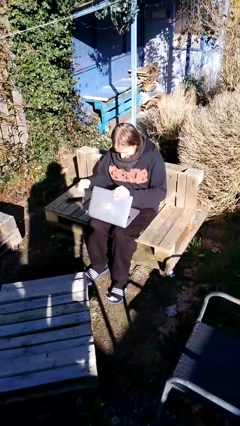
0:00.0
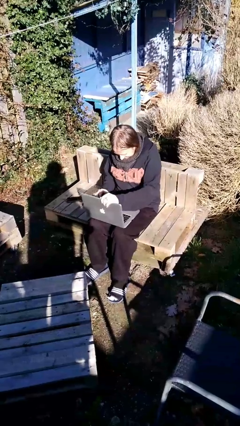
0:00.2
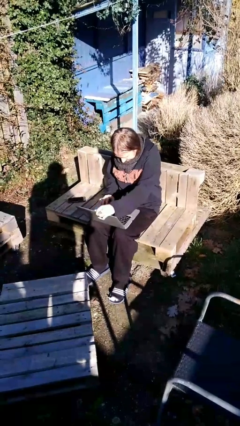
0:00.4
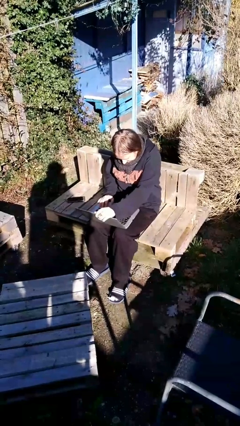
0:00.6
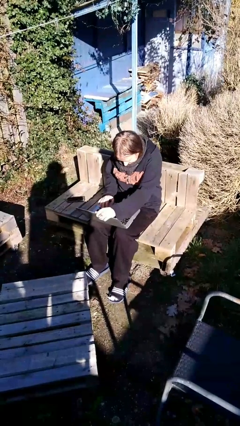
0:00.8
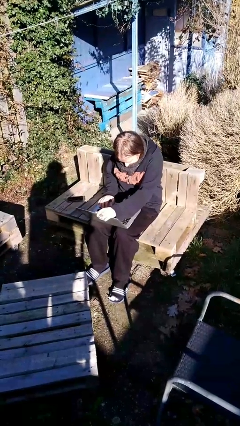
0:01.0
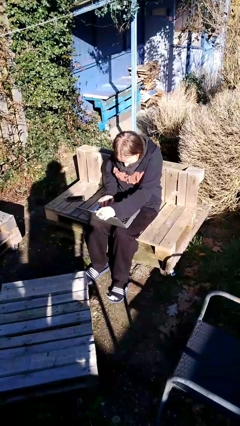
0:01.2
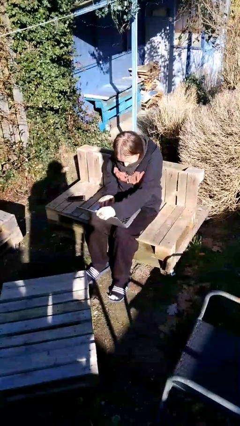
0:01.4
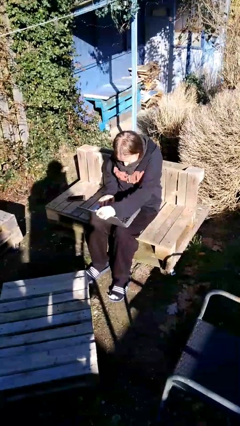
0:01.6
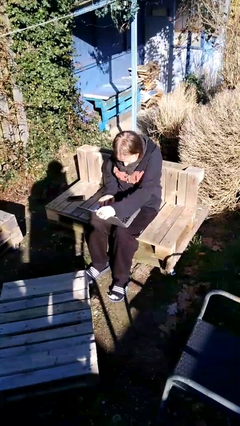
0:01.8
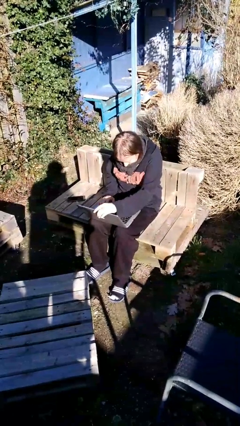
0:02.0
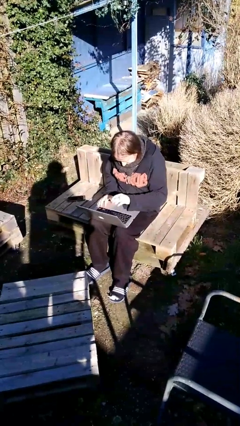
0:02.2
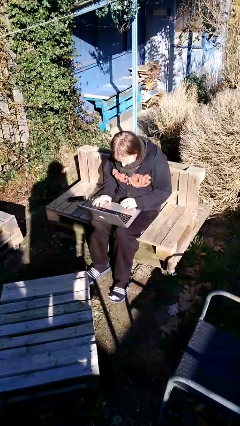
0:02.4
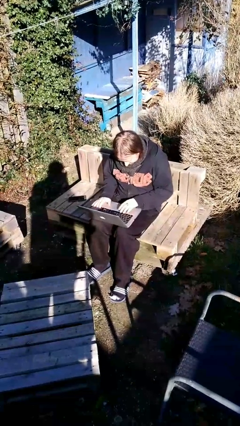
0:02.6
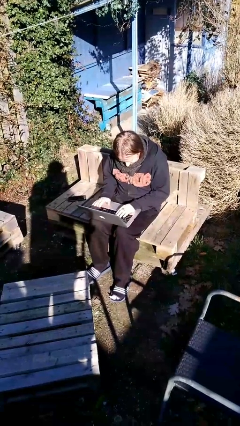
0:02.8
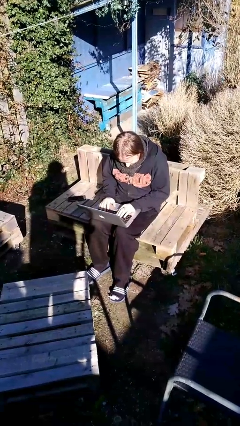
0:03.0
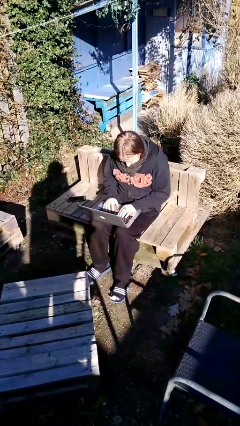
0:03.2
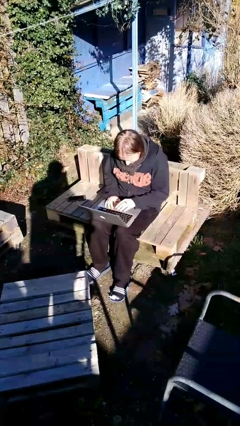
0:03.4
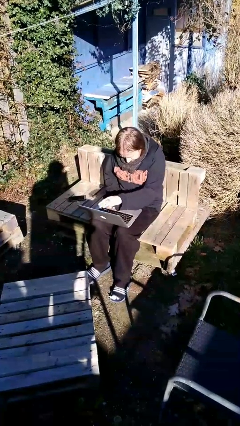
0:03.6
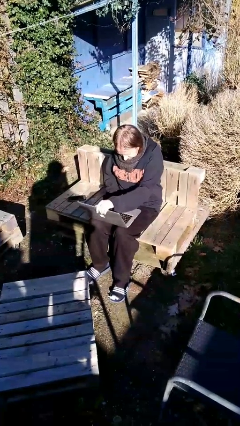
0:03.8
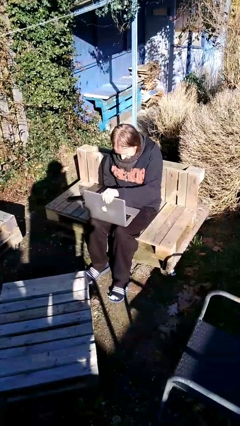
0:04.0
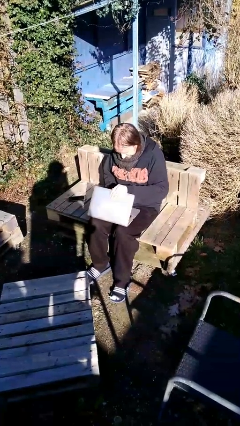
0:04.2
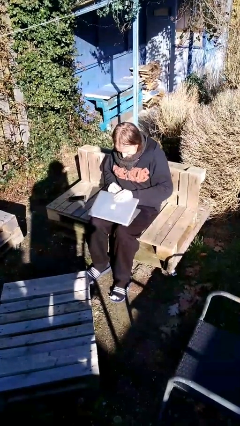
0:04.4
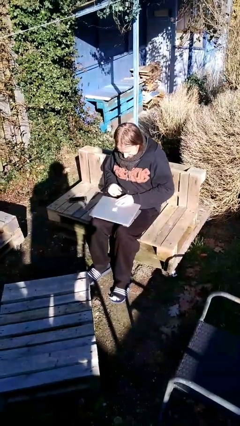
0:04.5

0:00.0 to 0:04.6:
person interacts with laptop

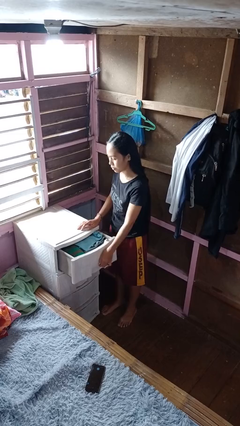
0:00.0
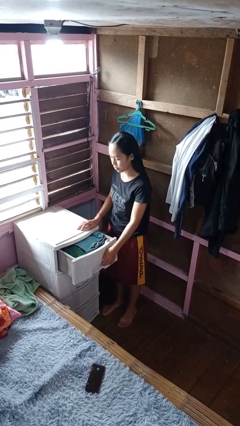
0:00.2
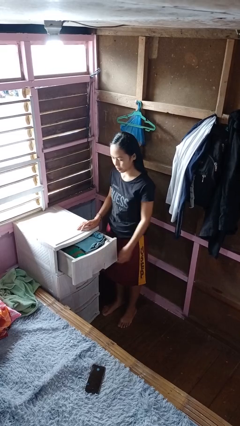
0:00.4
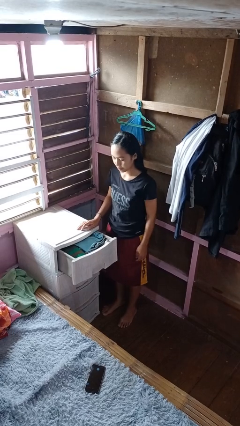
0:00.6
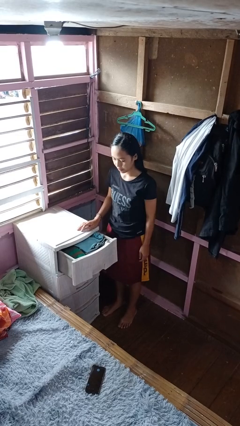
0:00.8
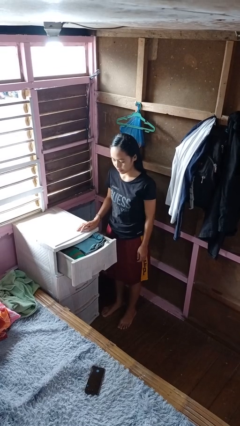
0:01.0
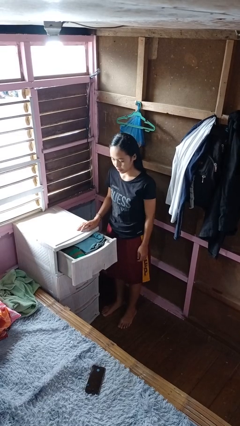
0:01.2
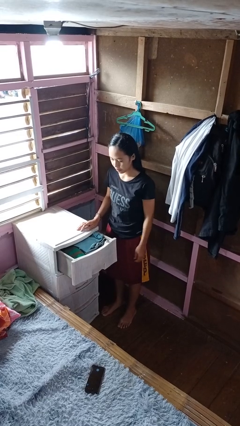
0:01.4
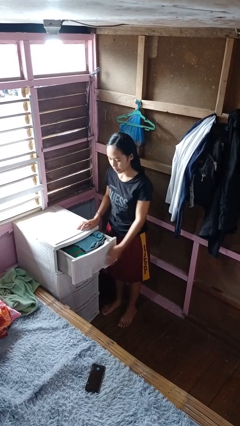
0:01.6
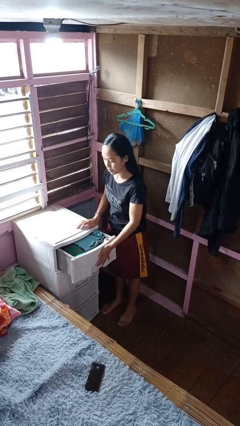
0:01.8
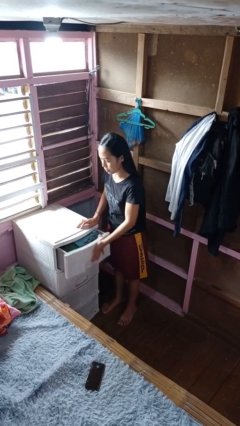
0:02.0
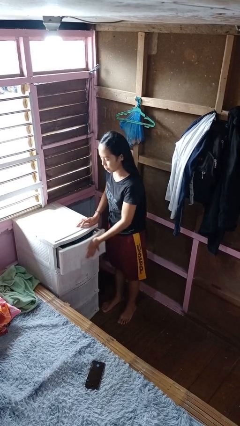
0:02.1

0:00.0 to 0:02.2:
person opens dresser drawer

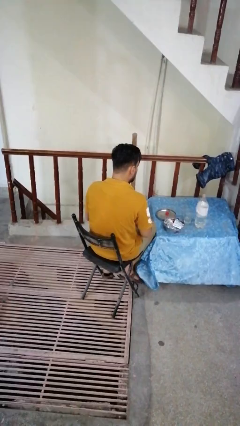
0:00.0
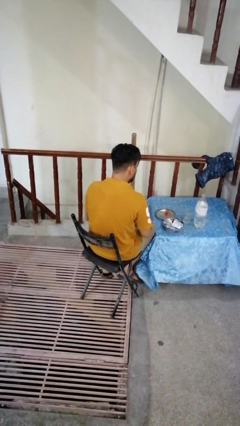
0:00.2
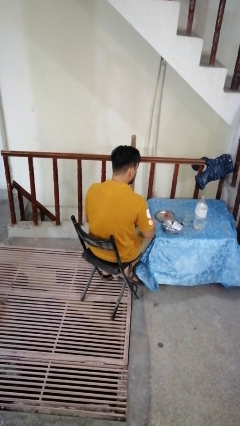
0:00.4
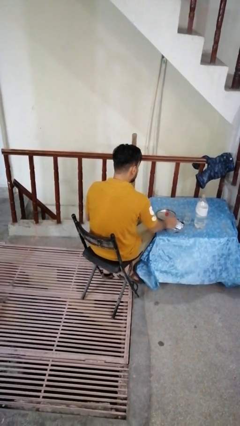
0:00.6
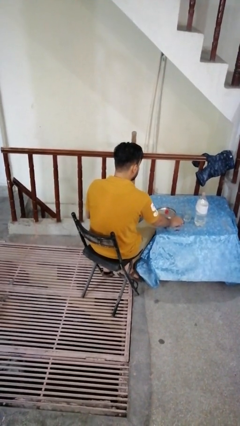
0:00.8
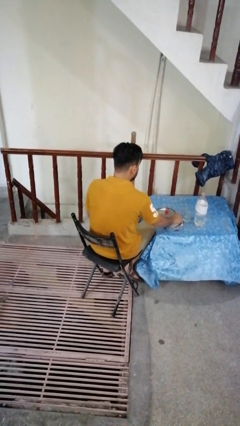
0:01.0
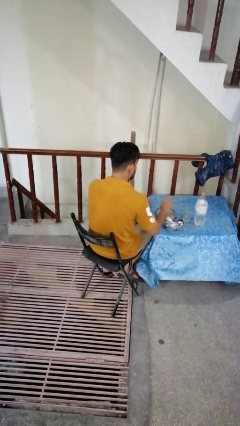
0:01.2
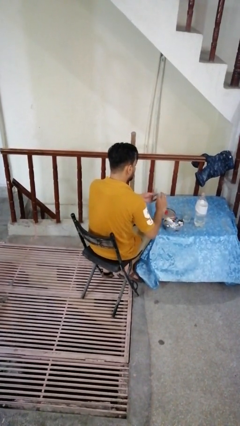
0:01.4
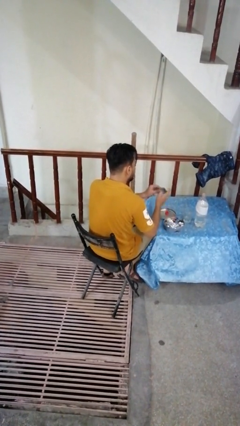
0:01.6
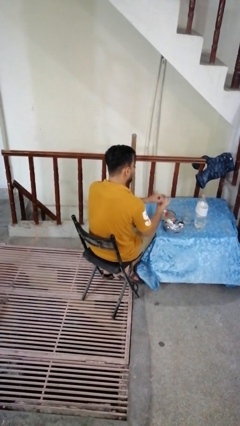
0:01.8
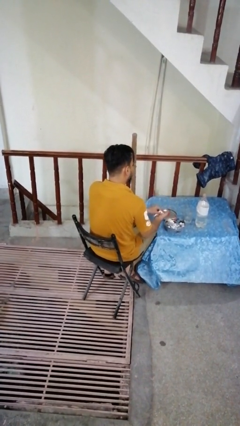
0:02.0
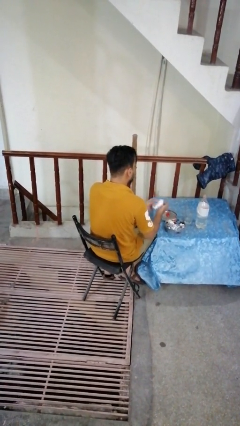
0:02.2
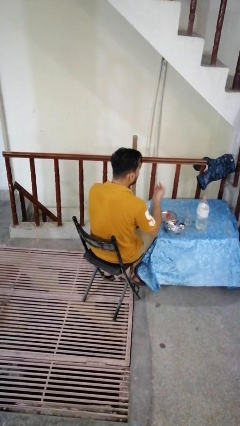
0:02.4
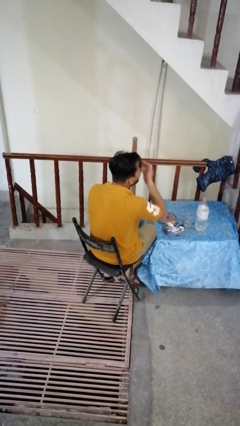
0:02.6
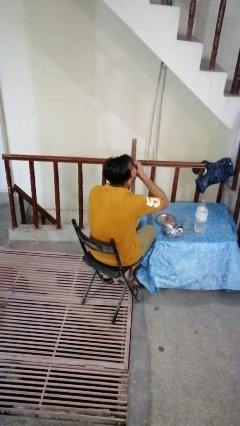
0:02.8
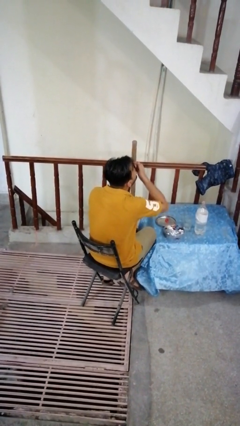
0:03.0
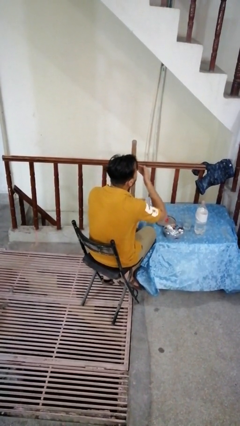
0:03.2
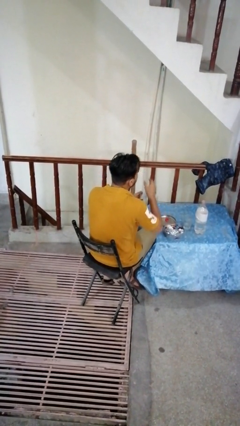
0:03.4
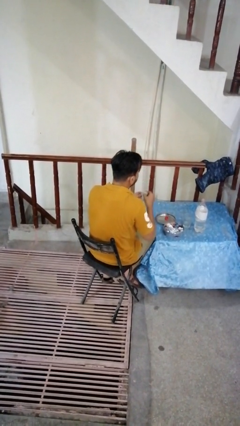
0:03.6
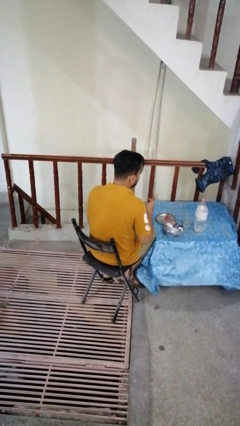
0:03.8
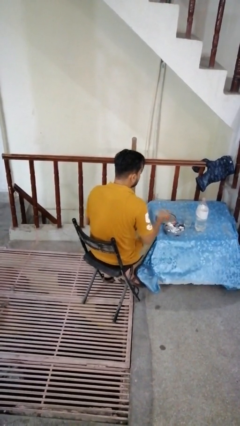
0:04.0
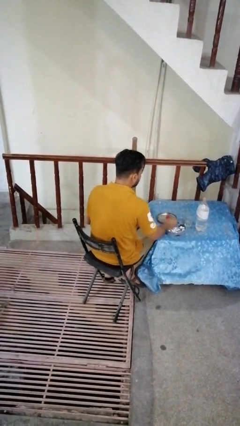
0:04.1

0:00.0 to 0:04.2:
person takes medicine pills

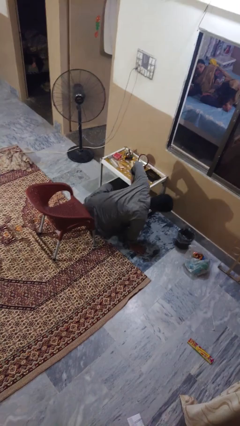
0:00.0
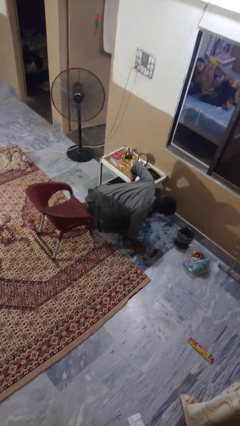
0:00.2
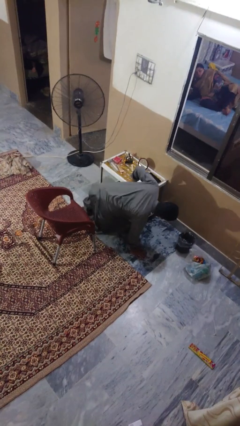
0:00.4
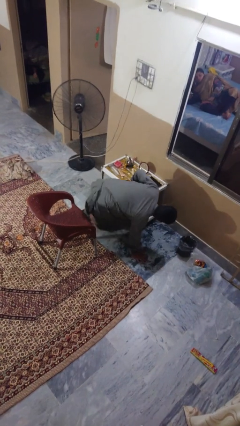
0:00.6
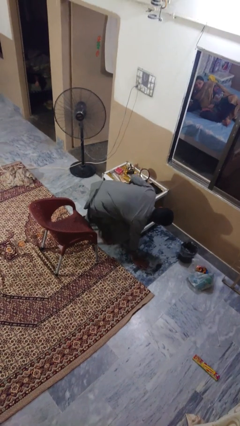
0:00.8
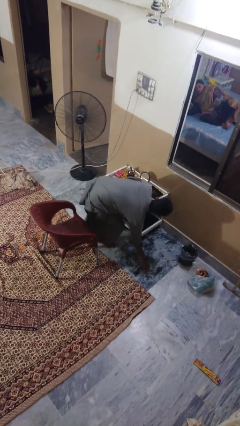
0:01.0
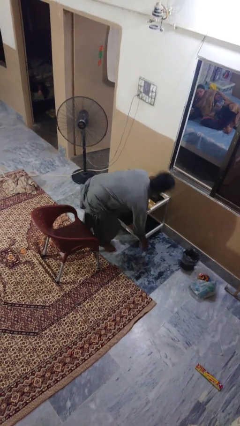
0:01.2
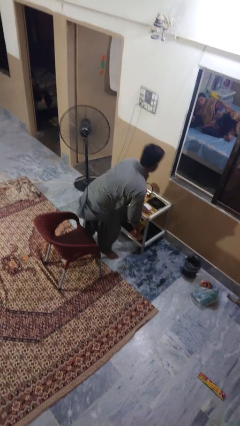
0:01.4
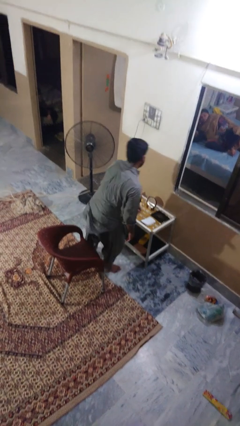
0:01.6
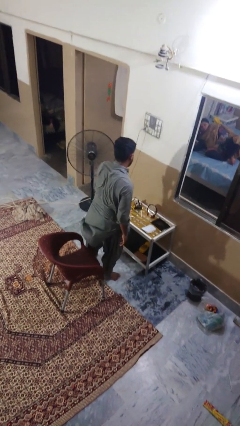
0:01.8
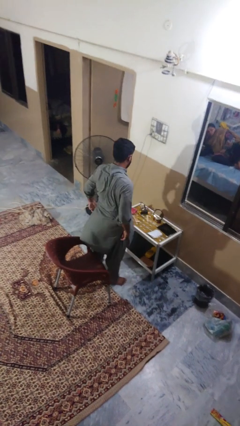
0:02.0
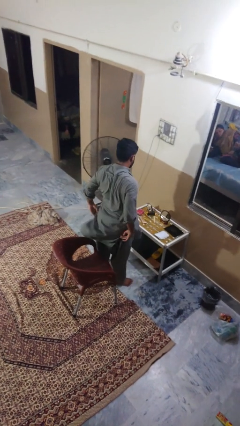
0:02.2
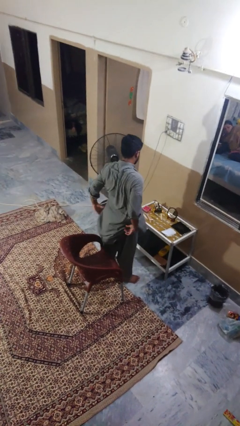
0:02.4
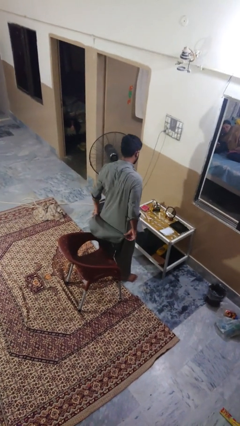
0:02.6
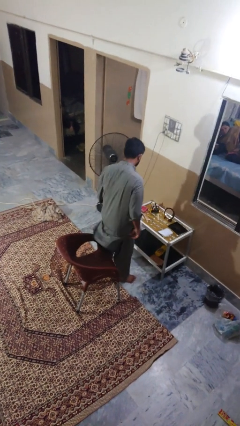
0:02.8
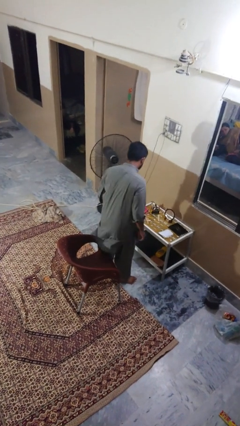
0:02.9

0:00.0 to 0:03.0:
person stands up from floor

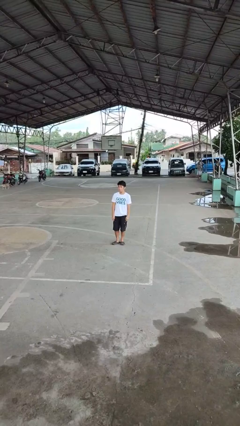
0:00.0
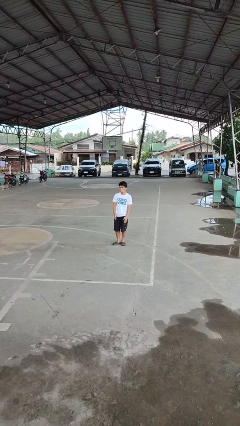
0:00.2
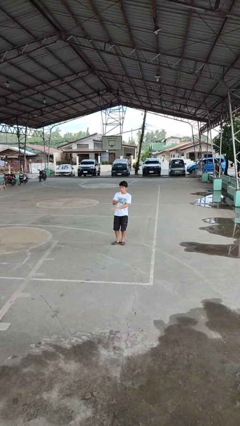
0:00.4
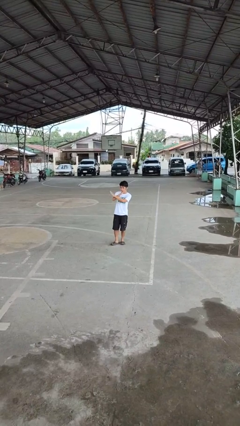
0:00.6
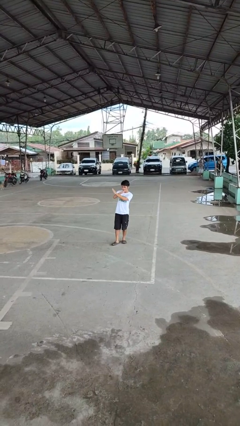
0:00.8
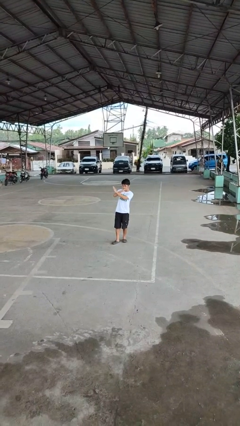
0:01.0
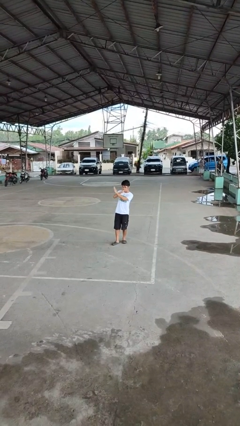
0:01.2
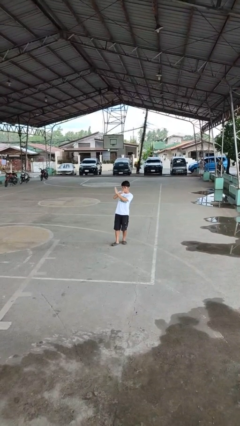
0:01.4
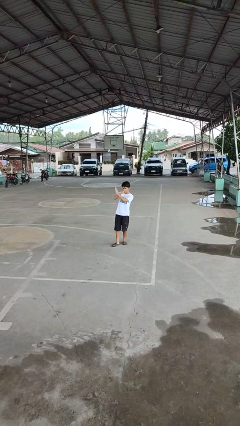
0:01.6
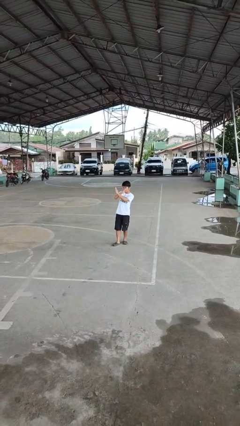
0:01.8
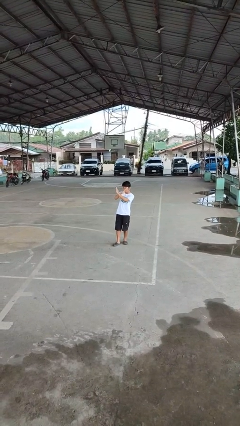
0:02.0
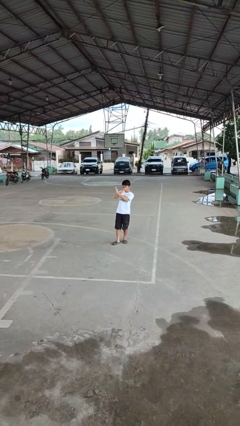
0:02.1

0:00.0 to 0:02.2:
person gestures arms x

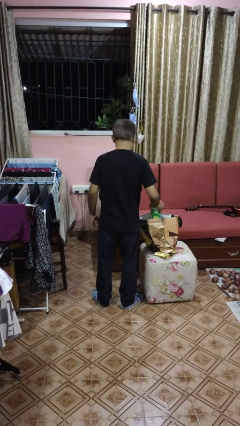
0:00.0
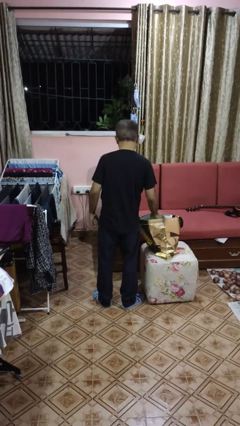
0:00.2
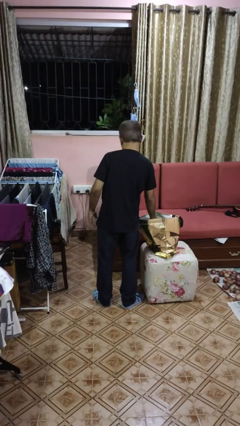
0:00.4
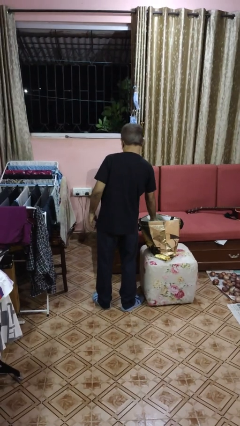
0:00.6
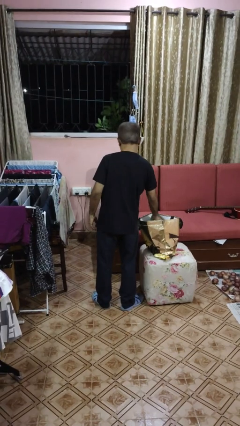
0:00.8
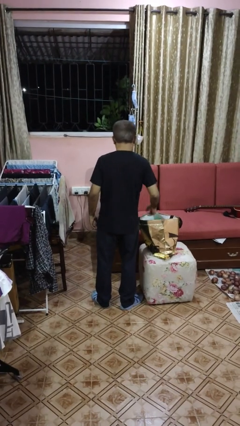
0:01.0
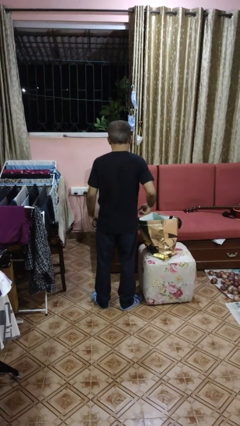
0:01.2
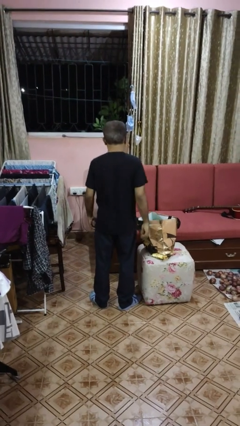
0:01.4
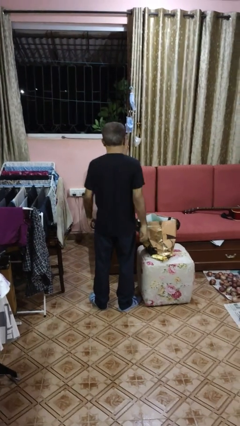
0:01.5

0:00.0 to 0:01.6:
person puts object into bag
